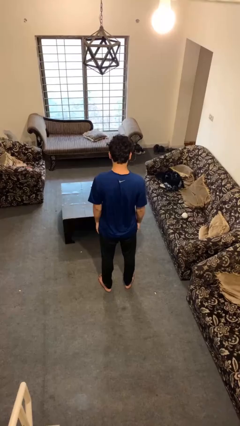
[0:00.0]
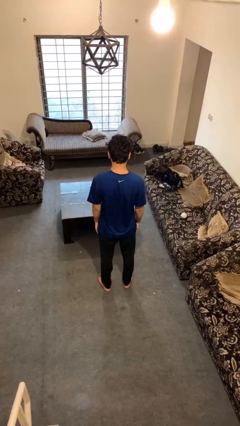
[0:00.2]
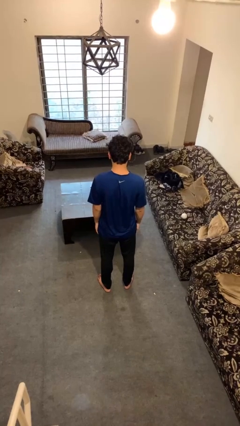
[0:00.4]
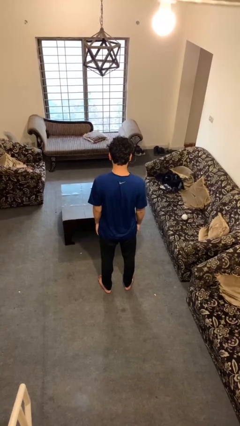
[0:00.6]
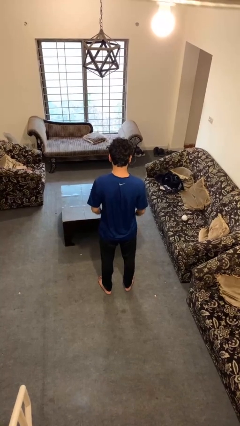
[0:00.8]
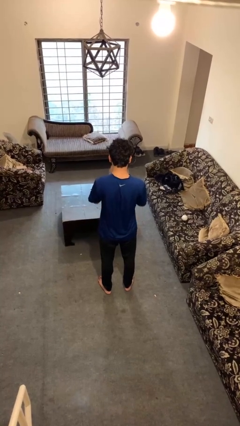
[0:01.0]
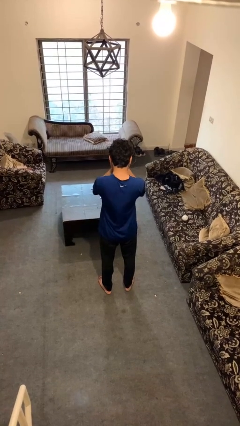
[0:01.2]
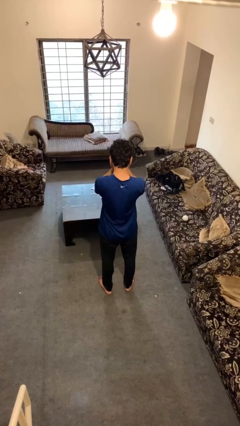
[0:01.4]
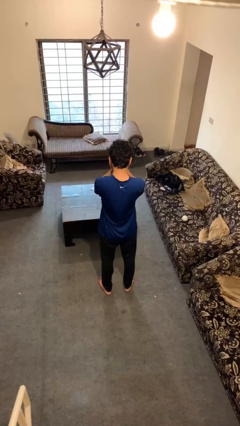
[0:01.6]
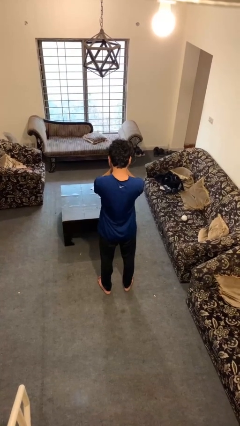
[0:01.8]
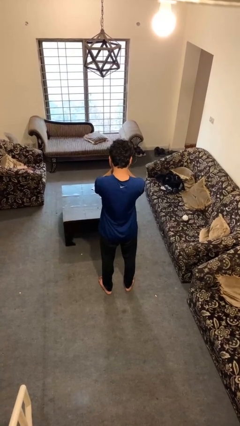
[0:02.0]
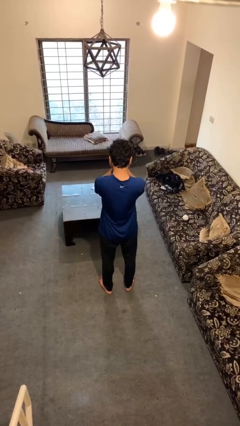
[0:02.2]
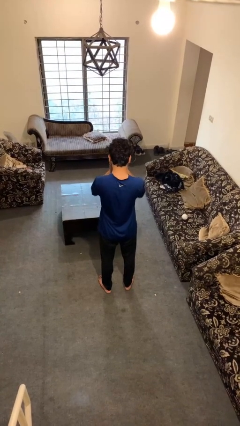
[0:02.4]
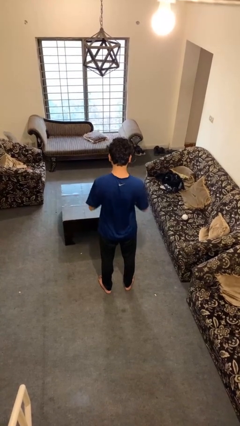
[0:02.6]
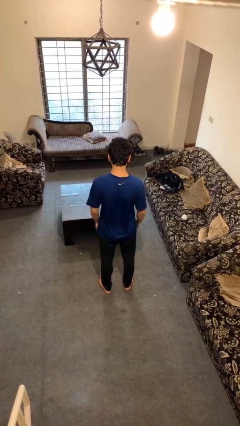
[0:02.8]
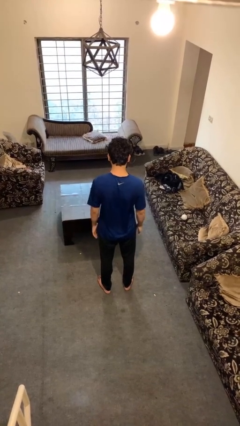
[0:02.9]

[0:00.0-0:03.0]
person covers face with hands

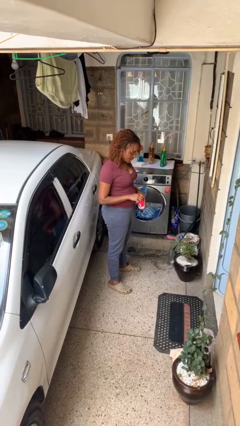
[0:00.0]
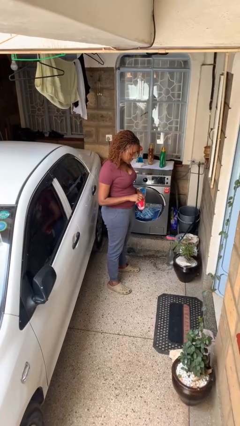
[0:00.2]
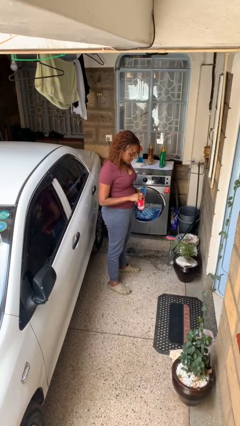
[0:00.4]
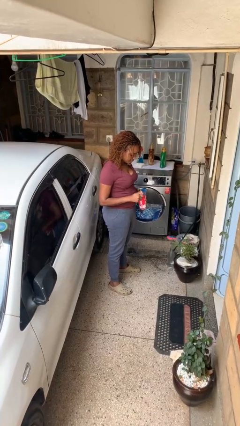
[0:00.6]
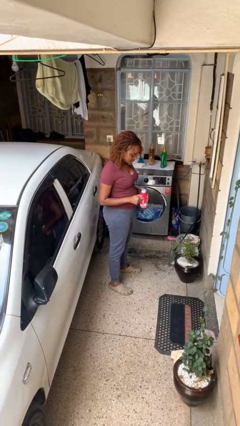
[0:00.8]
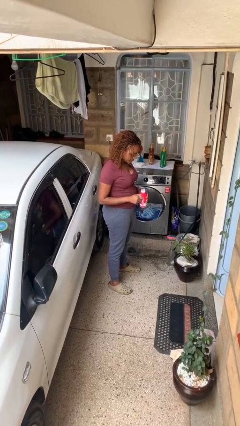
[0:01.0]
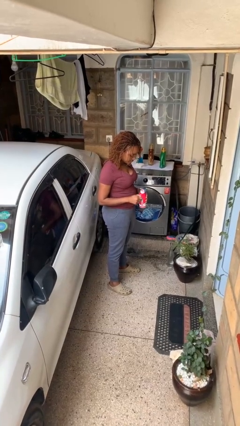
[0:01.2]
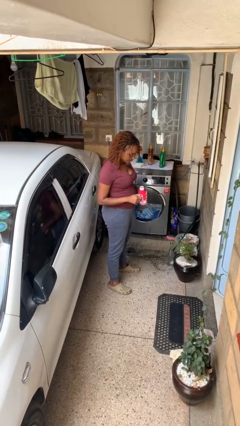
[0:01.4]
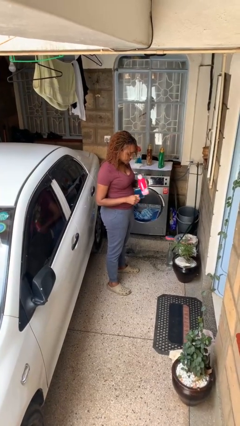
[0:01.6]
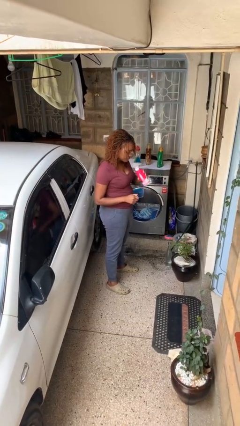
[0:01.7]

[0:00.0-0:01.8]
person opens beverage can

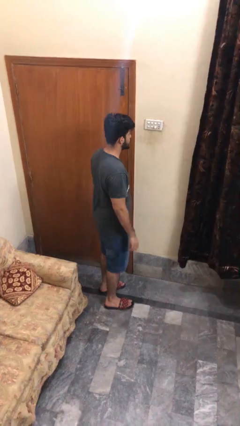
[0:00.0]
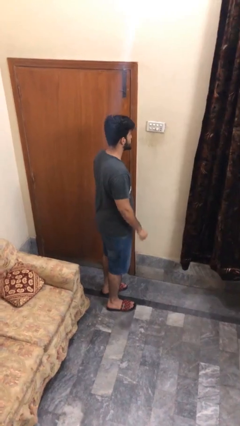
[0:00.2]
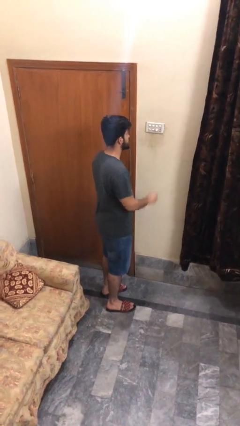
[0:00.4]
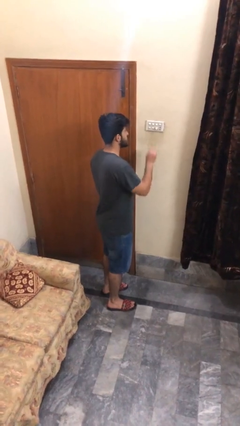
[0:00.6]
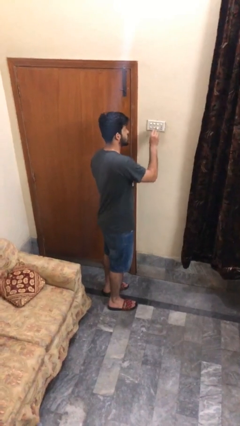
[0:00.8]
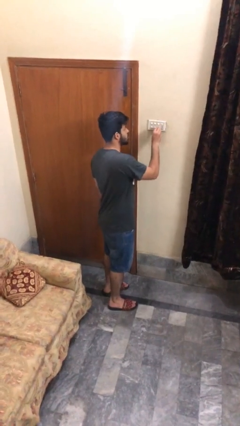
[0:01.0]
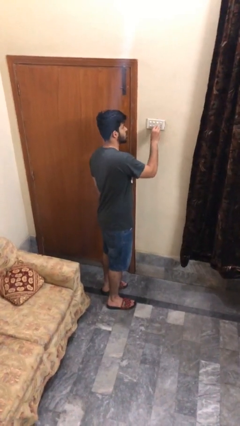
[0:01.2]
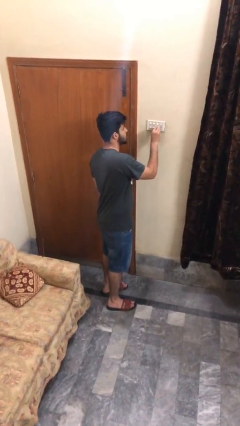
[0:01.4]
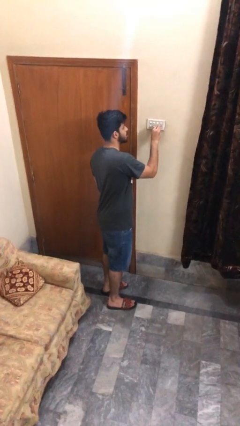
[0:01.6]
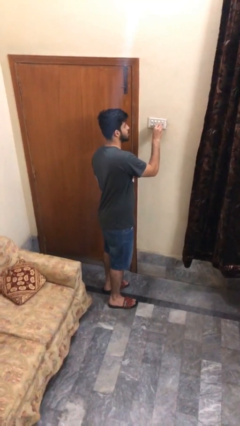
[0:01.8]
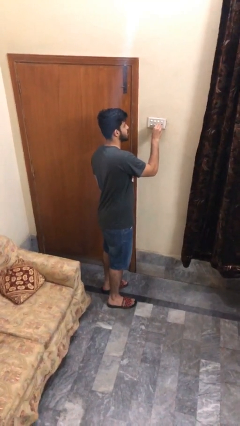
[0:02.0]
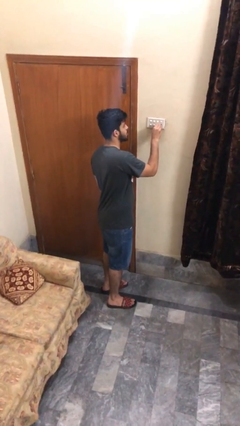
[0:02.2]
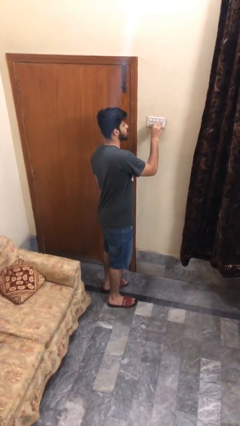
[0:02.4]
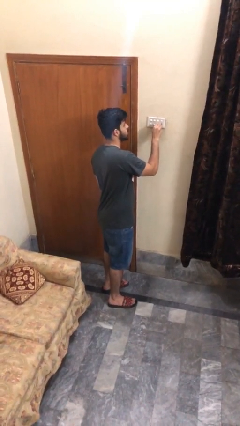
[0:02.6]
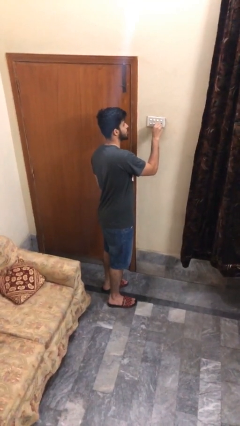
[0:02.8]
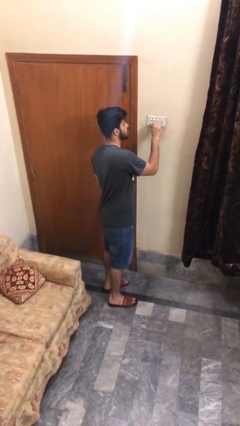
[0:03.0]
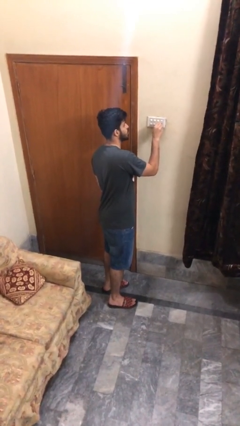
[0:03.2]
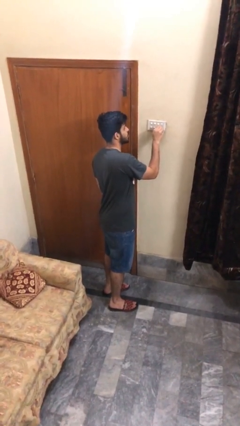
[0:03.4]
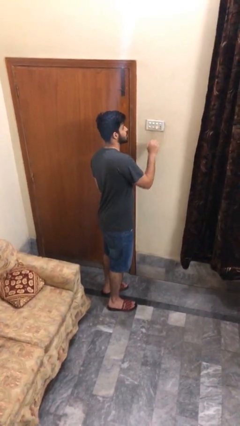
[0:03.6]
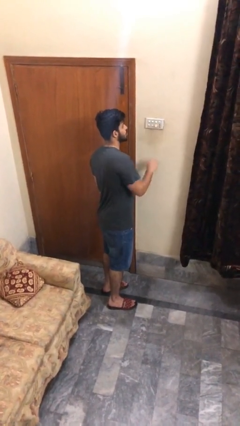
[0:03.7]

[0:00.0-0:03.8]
person adjusts thermostat

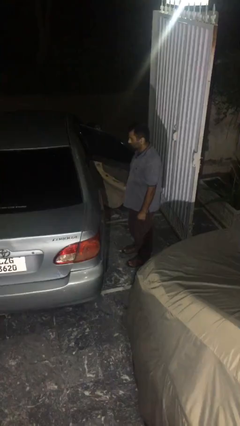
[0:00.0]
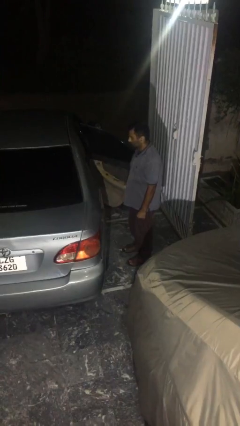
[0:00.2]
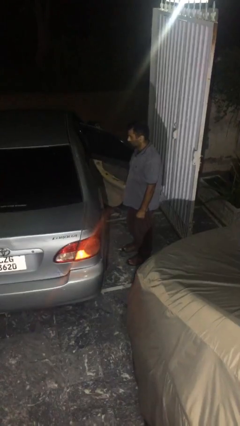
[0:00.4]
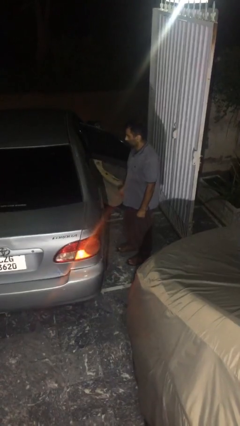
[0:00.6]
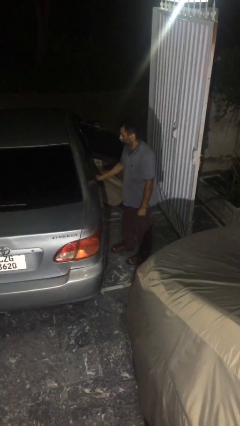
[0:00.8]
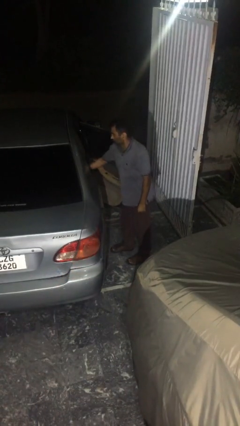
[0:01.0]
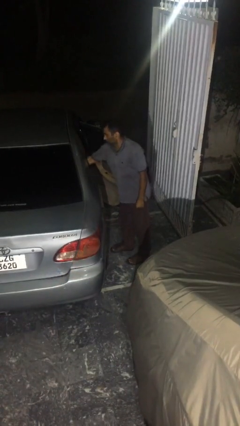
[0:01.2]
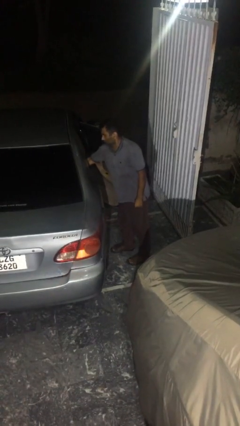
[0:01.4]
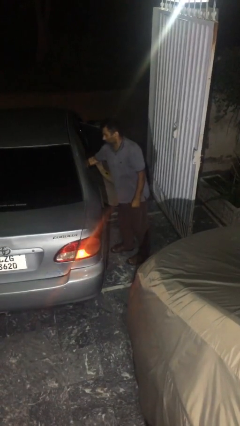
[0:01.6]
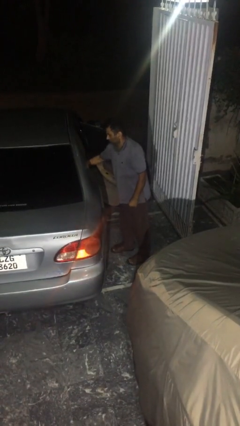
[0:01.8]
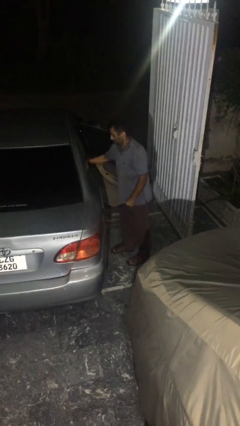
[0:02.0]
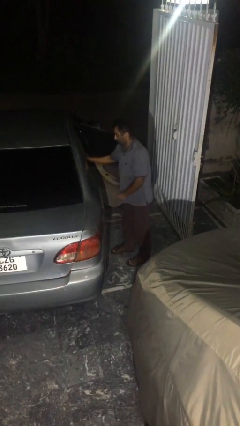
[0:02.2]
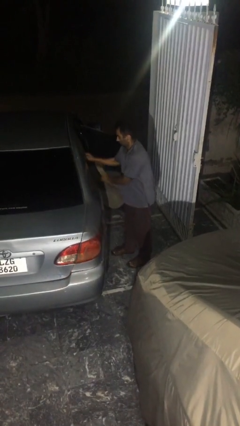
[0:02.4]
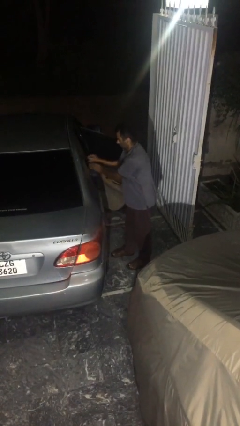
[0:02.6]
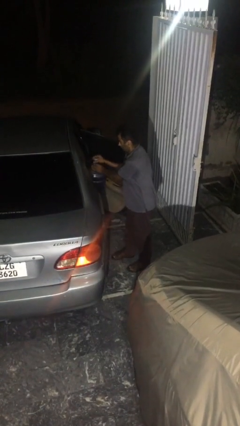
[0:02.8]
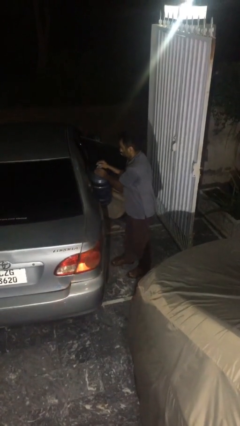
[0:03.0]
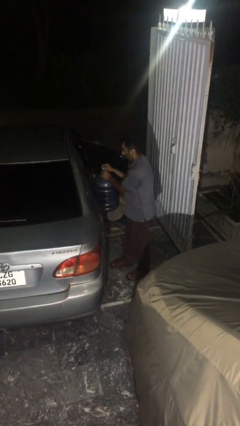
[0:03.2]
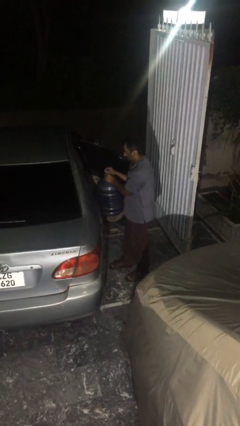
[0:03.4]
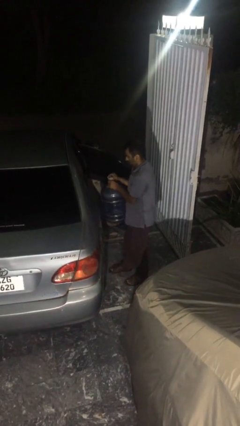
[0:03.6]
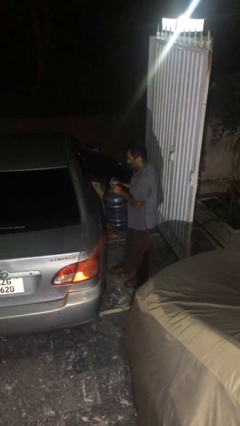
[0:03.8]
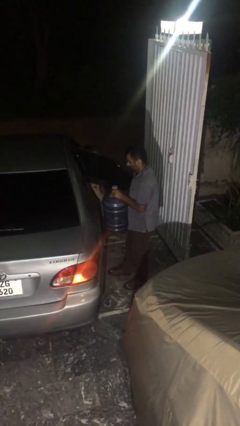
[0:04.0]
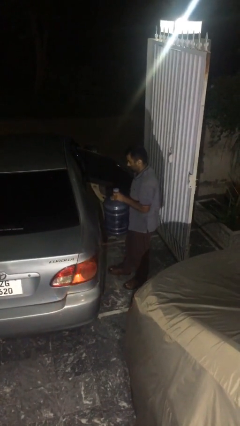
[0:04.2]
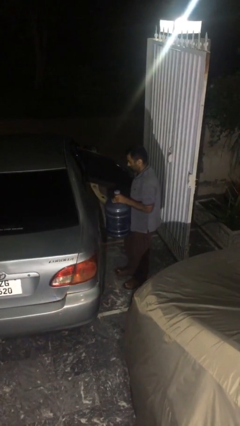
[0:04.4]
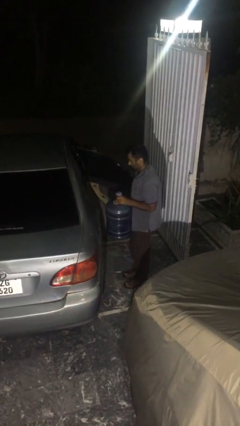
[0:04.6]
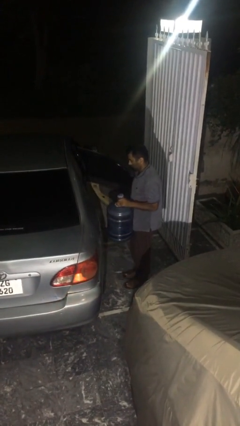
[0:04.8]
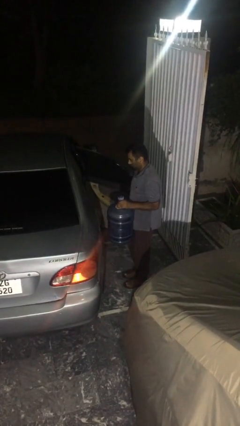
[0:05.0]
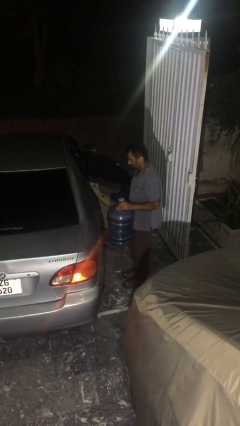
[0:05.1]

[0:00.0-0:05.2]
person unloads car

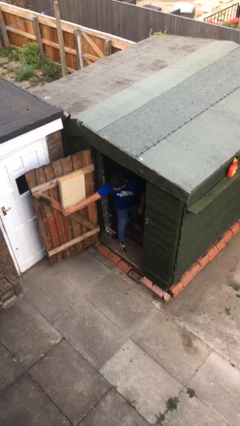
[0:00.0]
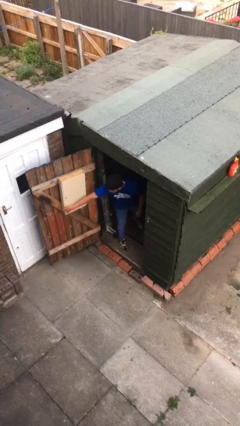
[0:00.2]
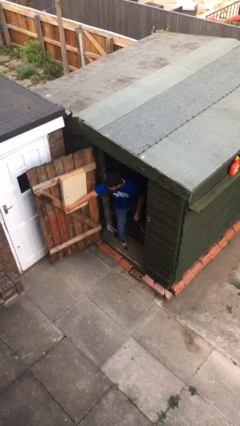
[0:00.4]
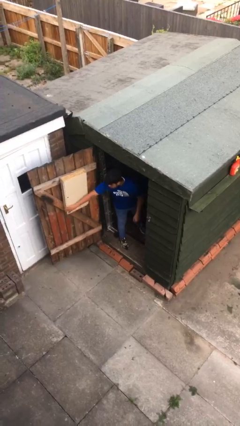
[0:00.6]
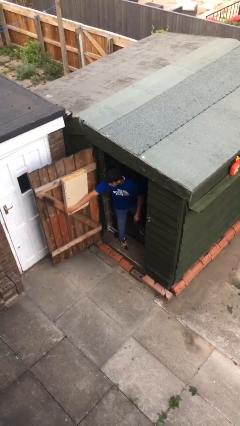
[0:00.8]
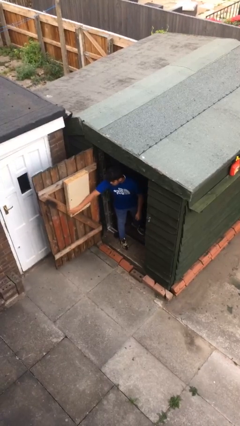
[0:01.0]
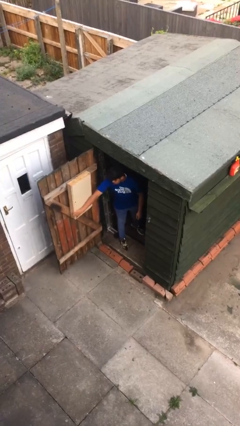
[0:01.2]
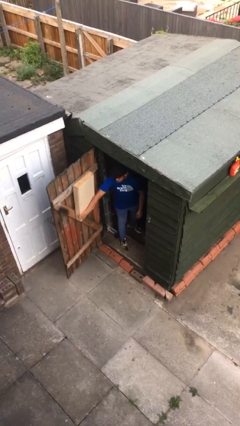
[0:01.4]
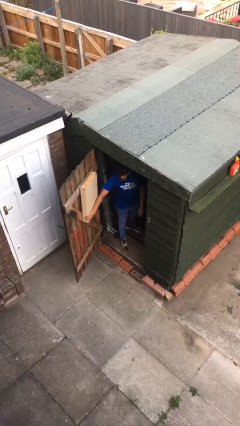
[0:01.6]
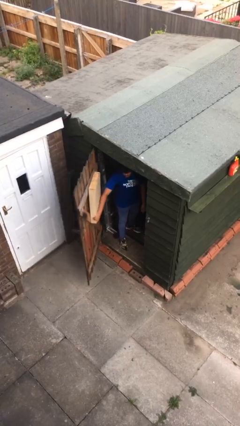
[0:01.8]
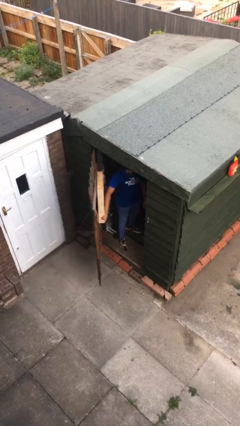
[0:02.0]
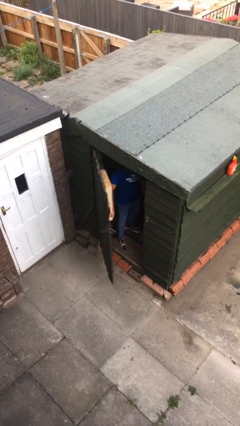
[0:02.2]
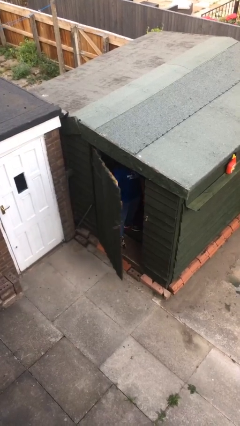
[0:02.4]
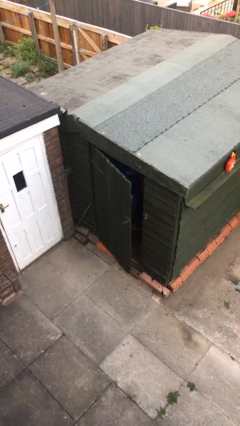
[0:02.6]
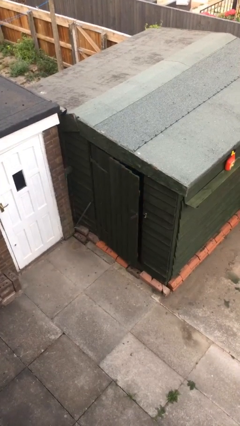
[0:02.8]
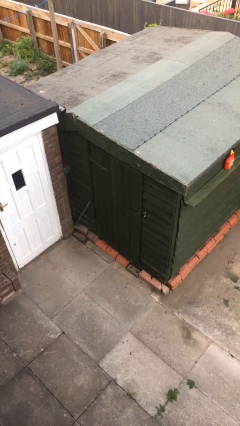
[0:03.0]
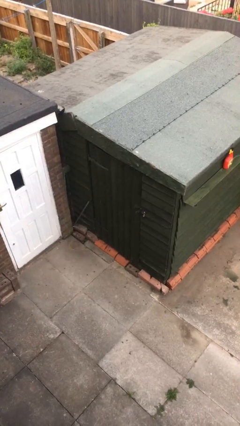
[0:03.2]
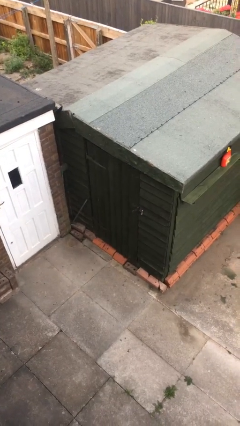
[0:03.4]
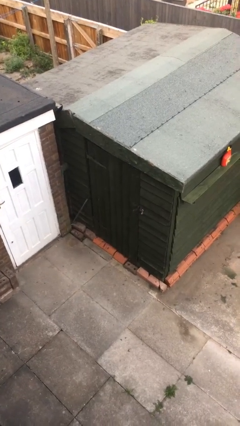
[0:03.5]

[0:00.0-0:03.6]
person closes facility door

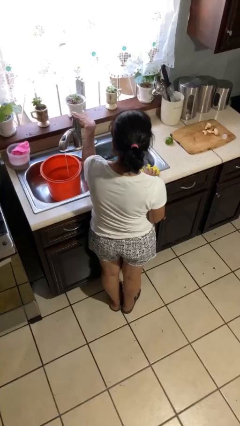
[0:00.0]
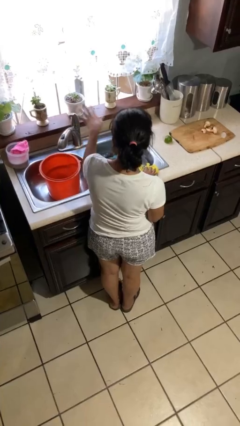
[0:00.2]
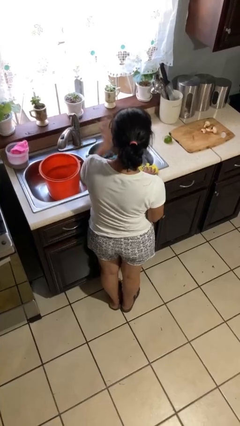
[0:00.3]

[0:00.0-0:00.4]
person turns off faucet
